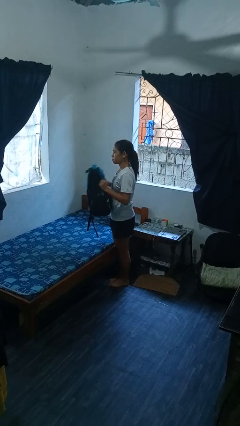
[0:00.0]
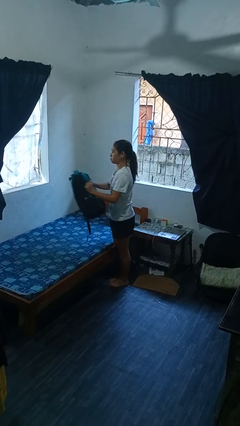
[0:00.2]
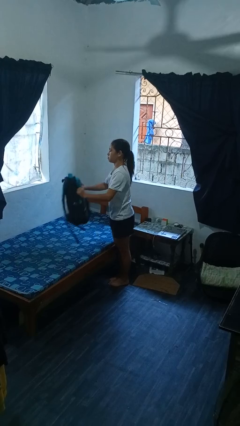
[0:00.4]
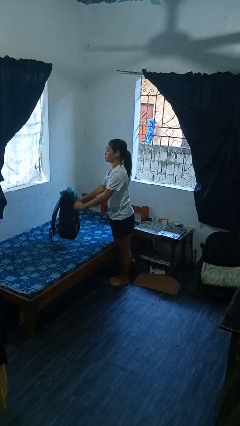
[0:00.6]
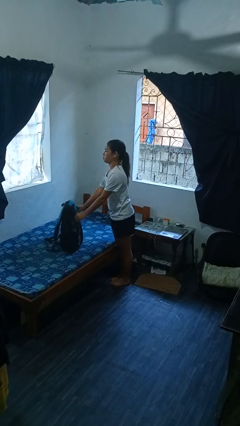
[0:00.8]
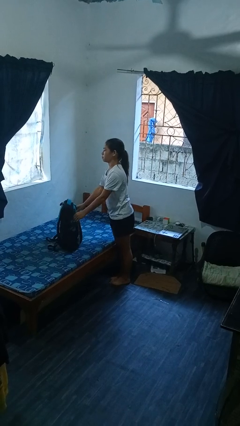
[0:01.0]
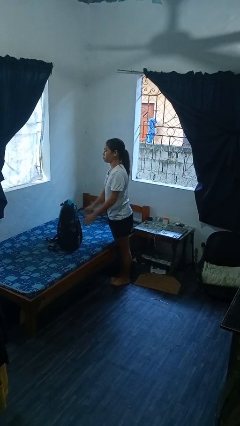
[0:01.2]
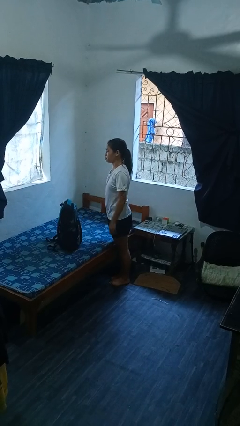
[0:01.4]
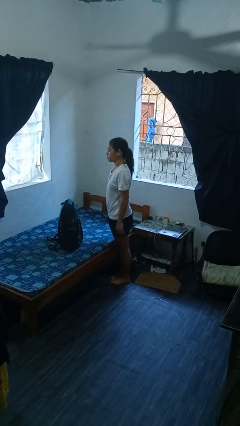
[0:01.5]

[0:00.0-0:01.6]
person puts down object on bed

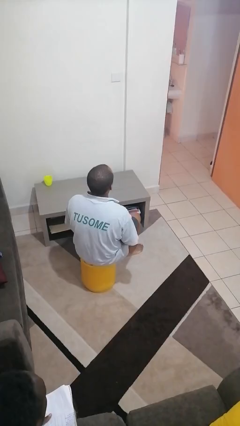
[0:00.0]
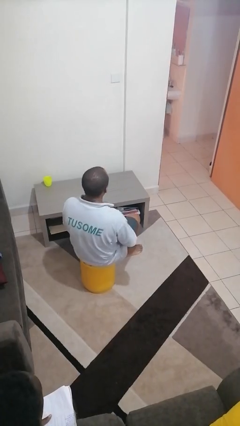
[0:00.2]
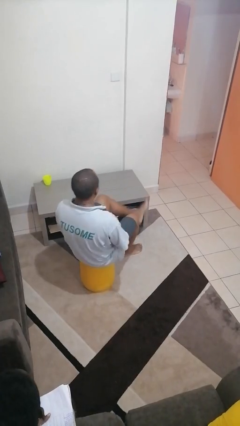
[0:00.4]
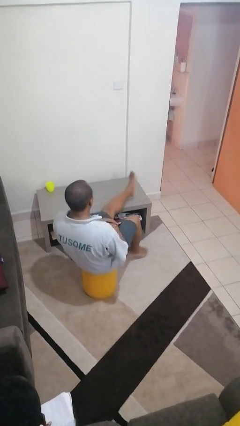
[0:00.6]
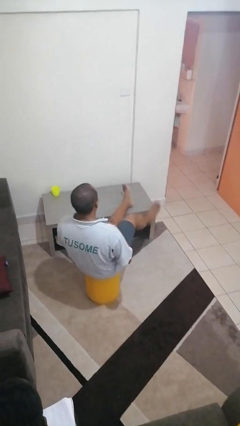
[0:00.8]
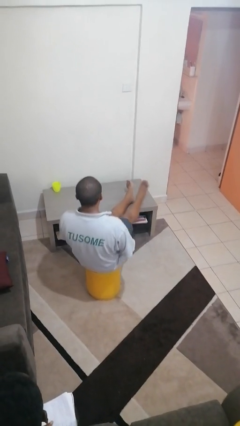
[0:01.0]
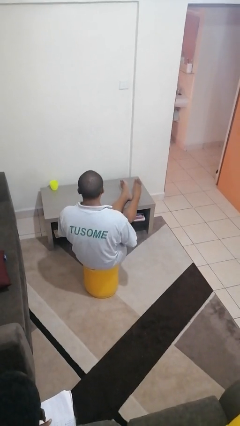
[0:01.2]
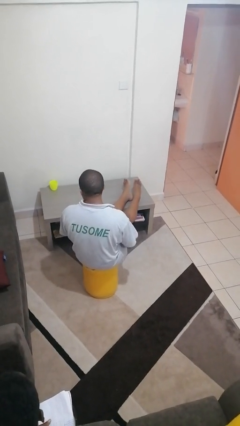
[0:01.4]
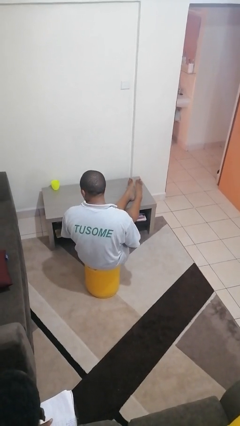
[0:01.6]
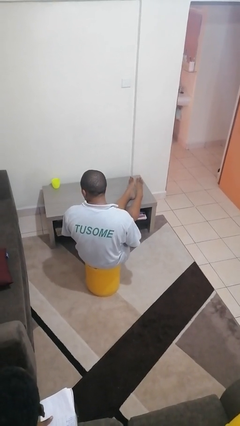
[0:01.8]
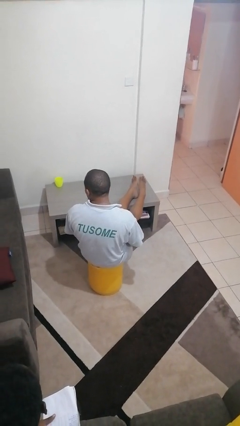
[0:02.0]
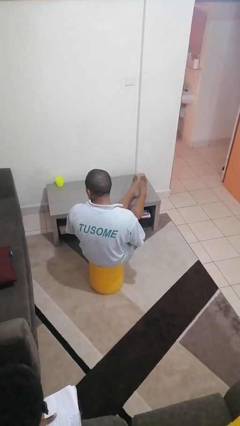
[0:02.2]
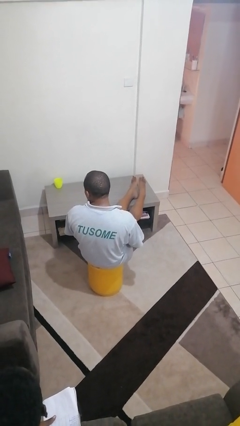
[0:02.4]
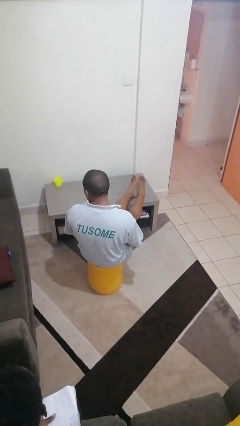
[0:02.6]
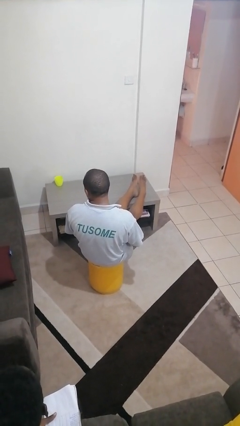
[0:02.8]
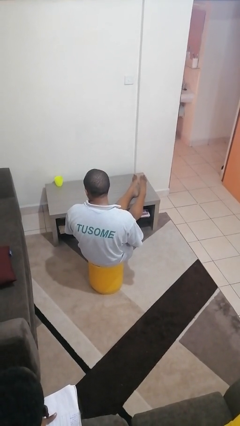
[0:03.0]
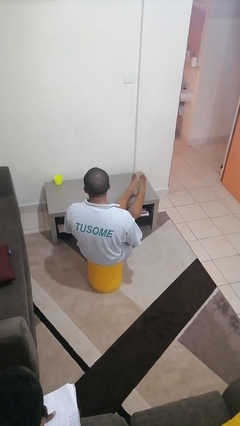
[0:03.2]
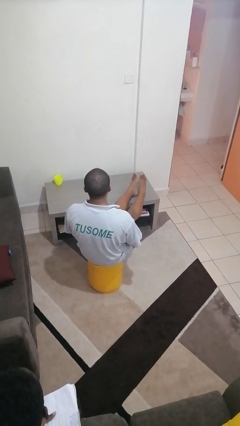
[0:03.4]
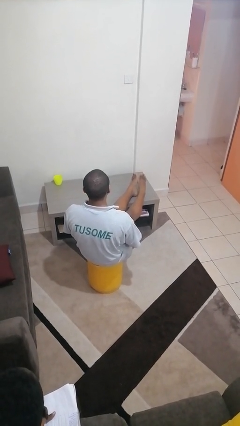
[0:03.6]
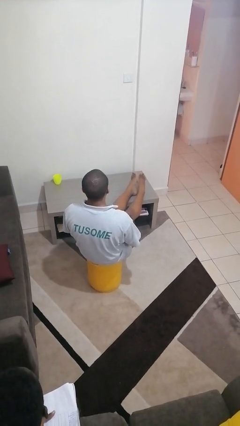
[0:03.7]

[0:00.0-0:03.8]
person puts feet up

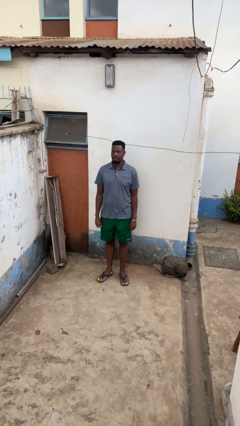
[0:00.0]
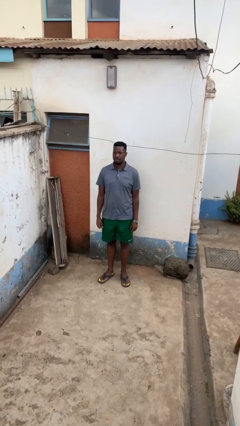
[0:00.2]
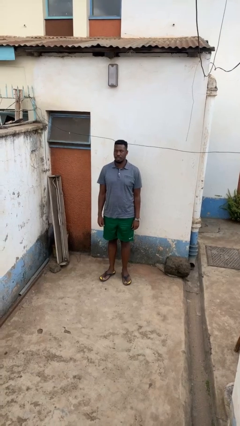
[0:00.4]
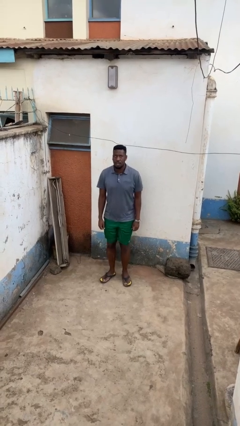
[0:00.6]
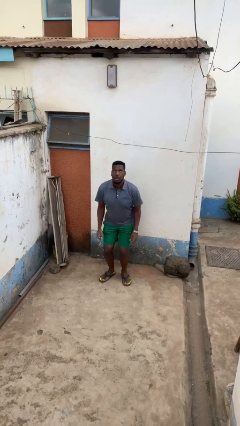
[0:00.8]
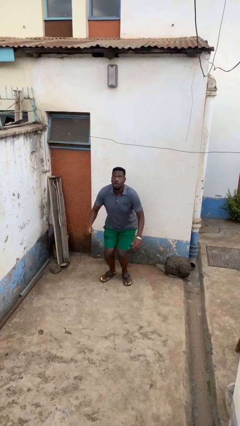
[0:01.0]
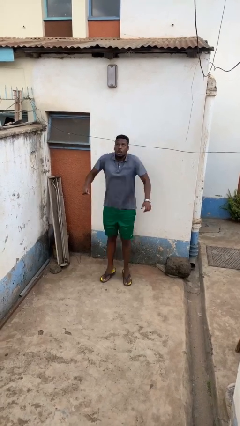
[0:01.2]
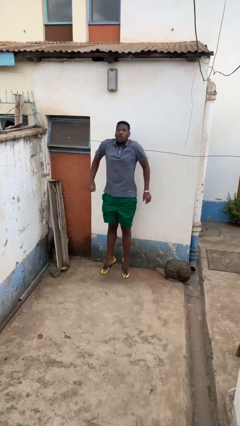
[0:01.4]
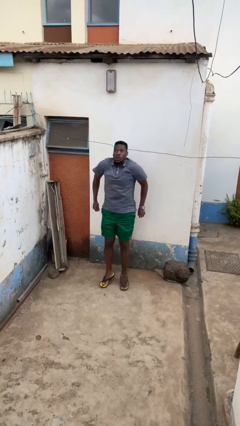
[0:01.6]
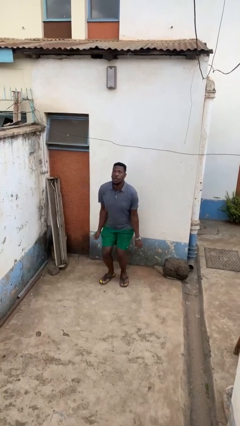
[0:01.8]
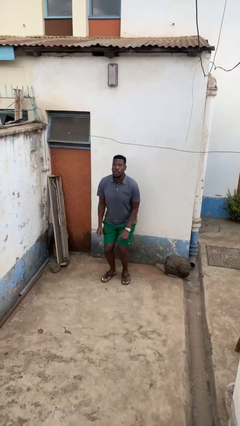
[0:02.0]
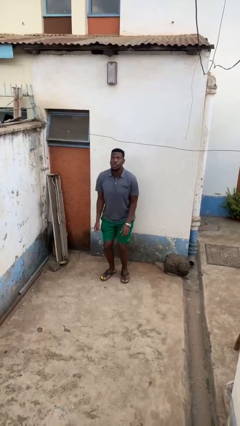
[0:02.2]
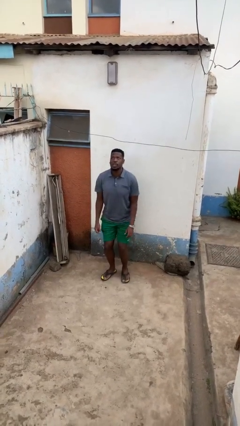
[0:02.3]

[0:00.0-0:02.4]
person jumps

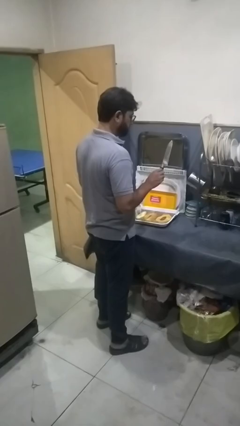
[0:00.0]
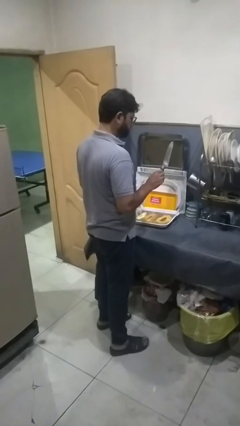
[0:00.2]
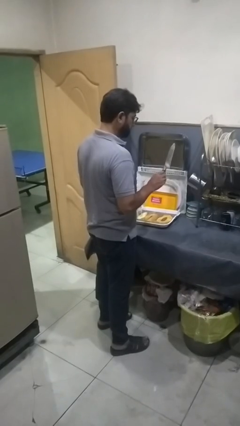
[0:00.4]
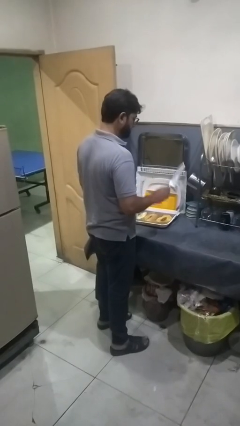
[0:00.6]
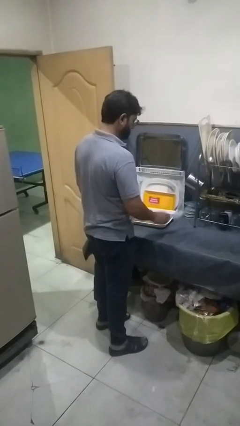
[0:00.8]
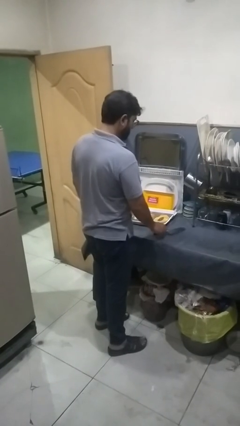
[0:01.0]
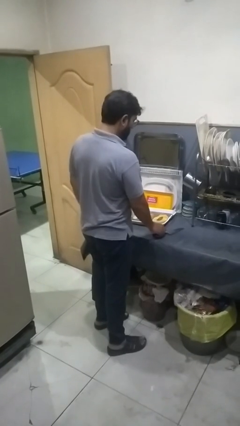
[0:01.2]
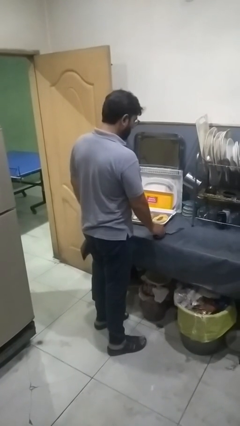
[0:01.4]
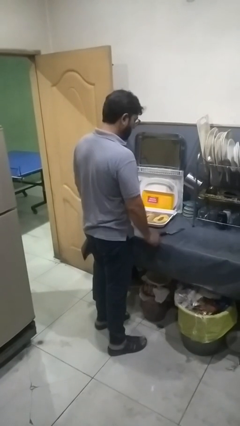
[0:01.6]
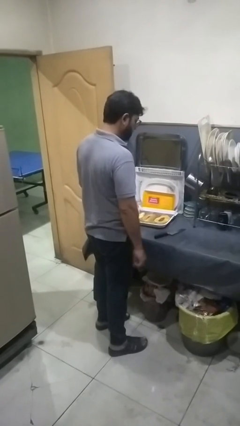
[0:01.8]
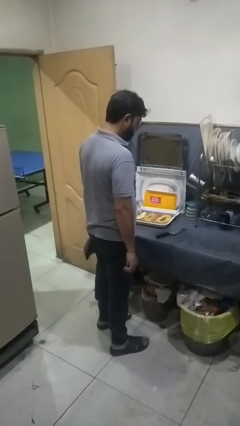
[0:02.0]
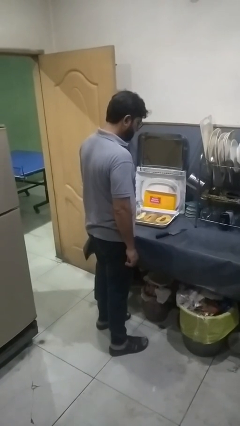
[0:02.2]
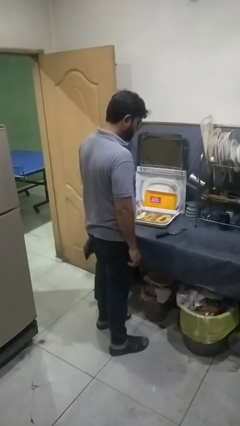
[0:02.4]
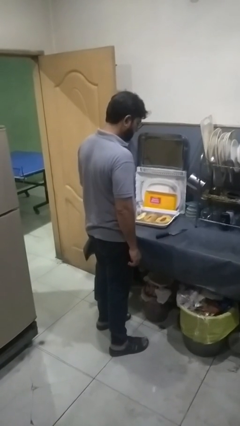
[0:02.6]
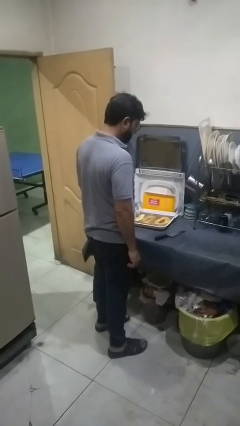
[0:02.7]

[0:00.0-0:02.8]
person puts down object on countertop

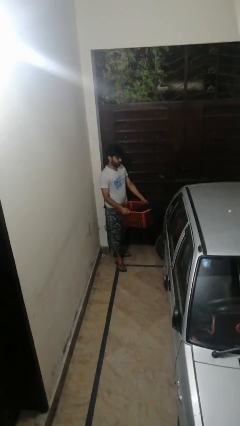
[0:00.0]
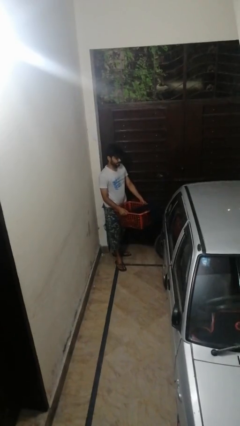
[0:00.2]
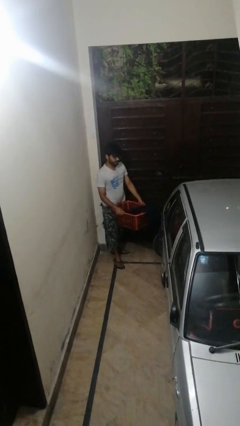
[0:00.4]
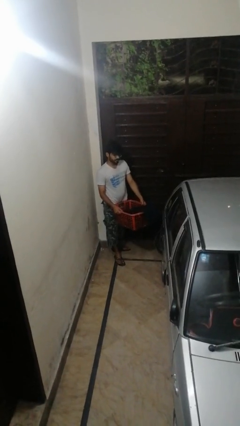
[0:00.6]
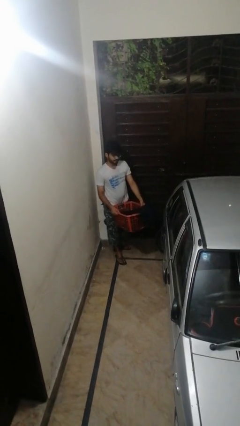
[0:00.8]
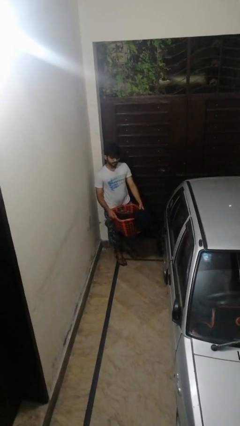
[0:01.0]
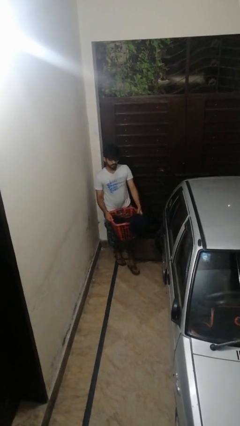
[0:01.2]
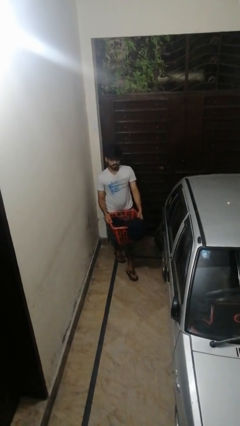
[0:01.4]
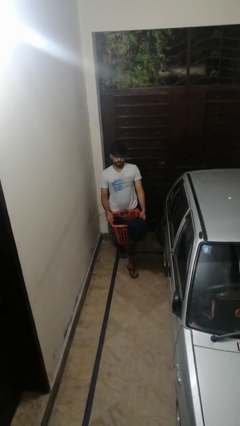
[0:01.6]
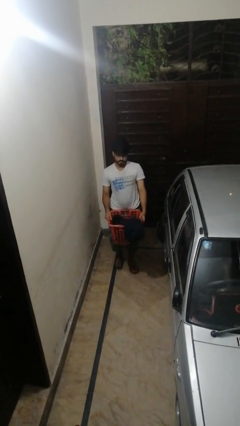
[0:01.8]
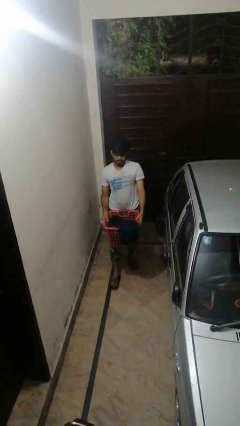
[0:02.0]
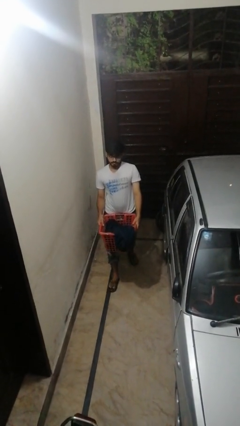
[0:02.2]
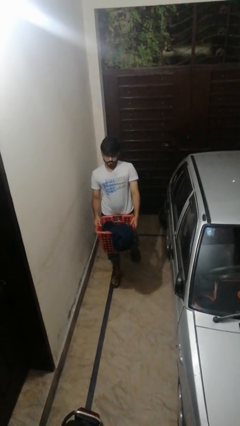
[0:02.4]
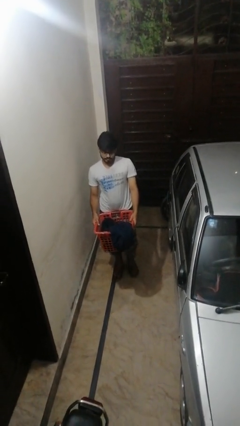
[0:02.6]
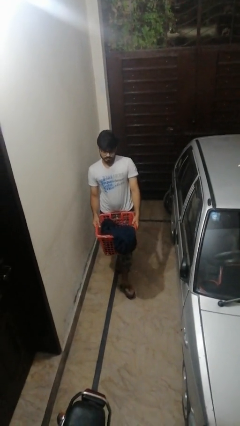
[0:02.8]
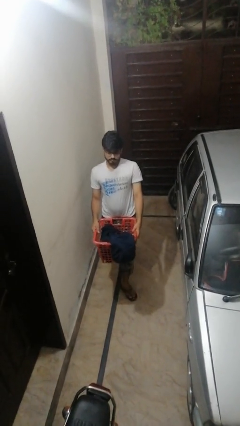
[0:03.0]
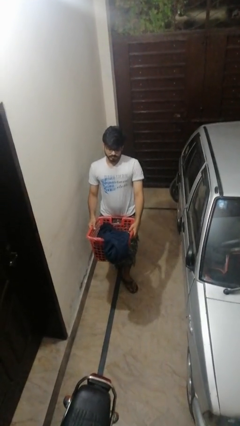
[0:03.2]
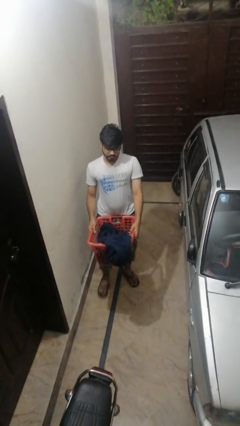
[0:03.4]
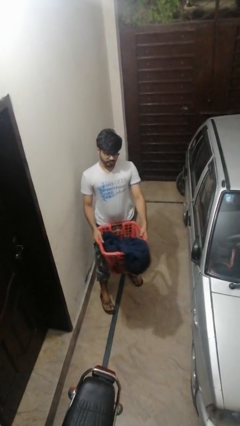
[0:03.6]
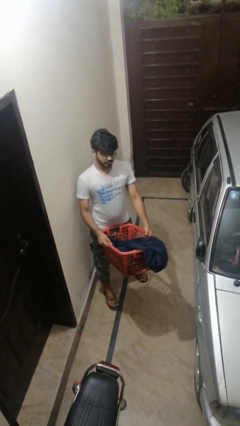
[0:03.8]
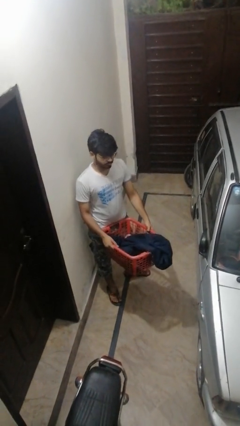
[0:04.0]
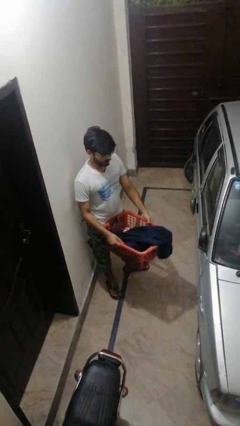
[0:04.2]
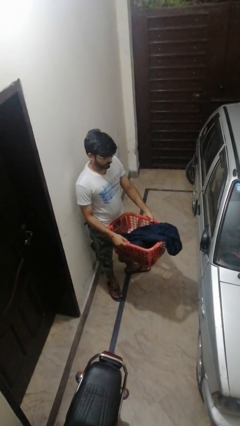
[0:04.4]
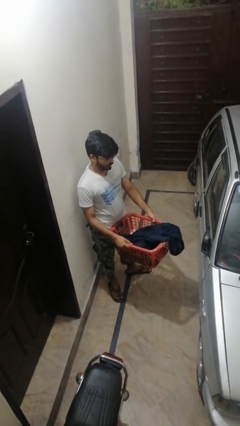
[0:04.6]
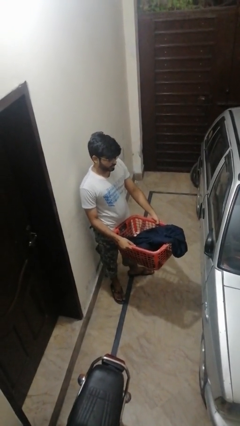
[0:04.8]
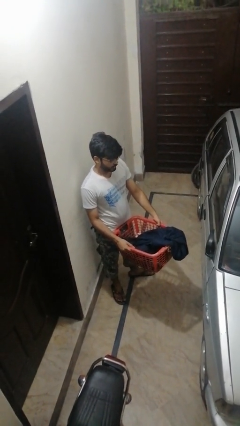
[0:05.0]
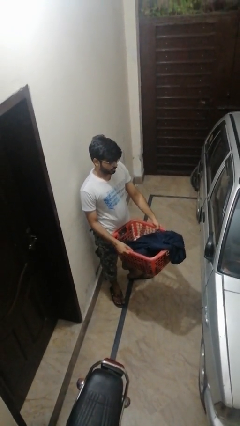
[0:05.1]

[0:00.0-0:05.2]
person carries laundry basket

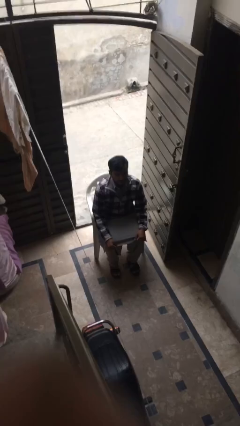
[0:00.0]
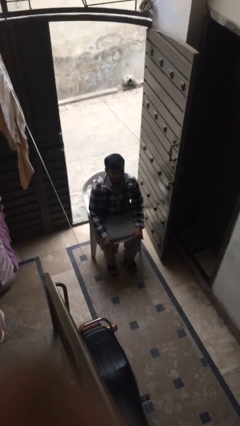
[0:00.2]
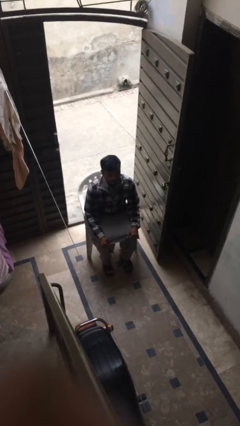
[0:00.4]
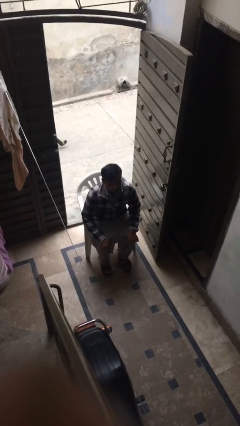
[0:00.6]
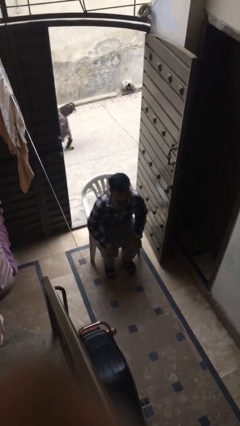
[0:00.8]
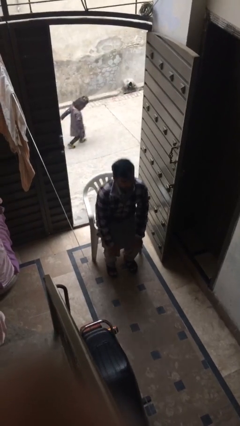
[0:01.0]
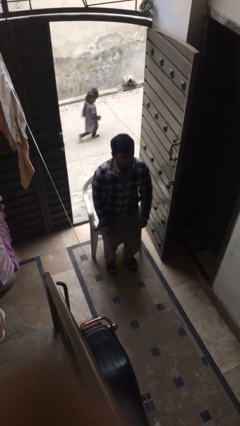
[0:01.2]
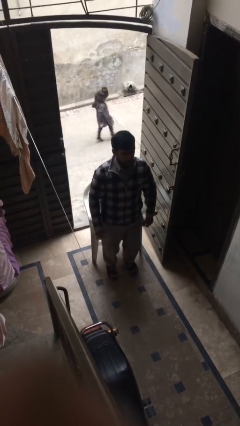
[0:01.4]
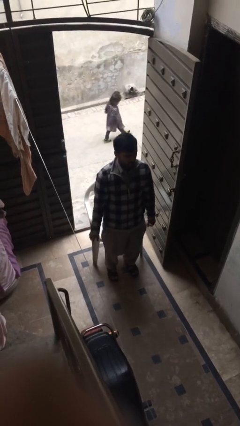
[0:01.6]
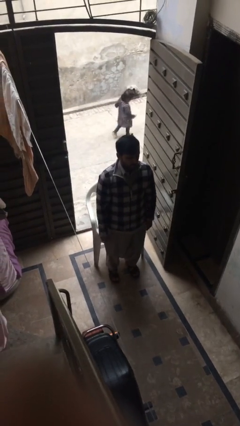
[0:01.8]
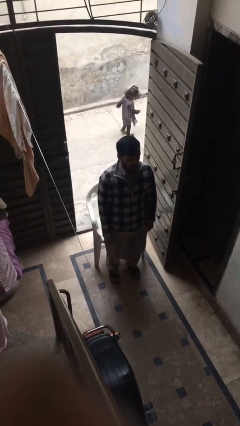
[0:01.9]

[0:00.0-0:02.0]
person stands up
